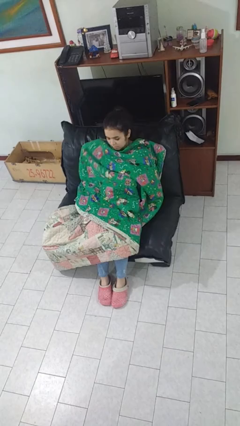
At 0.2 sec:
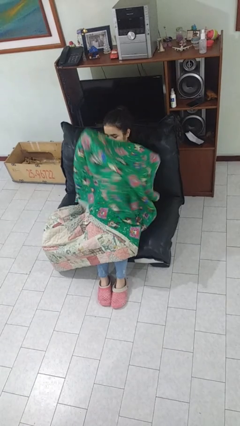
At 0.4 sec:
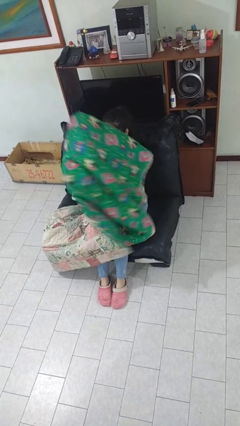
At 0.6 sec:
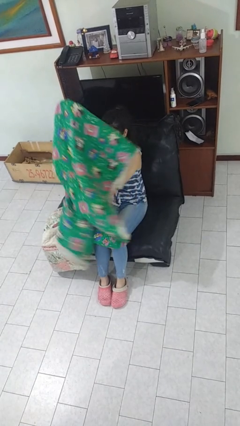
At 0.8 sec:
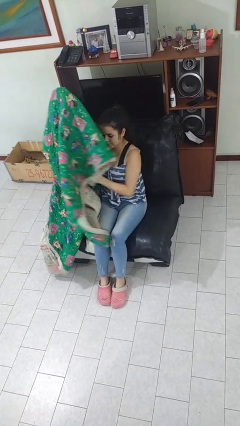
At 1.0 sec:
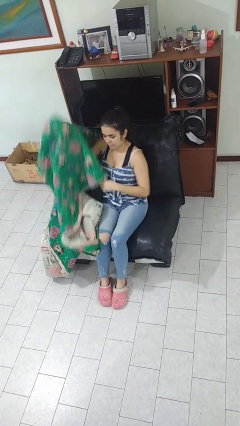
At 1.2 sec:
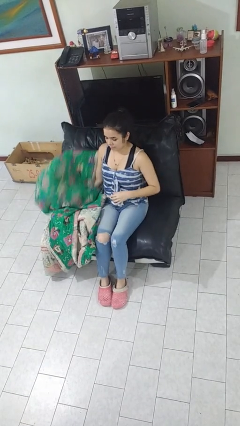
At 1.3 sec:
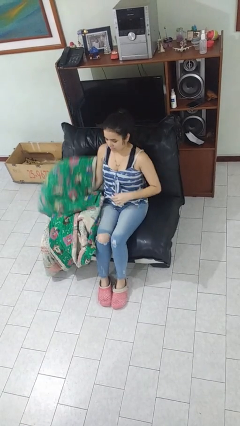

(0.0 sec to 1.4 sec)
person uncovers with blanket

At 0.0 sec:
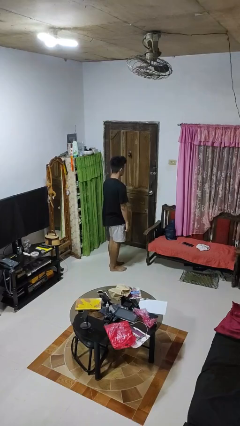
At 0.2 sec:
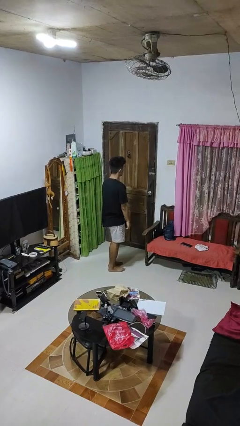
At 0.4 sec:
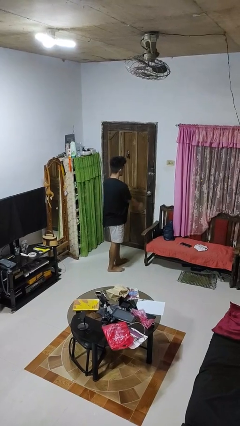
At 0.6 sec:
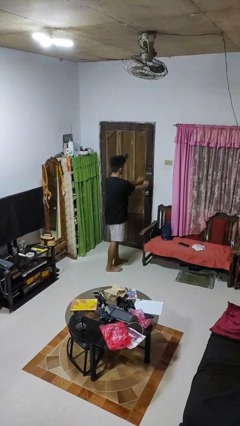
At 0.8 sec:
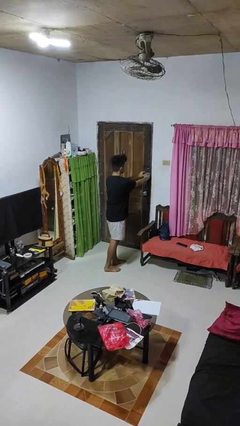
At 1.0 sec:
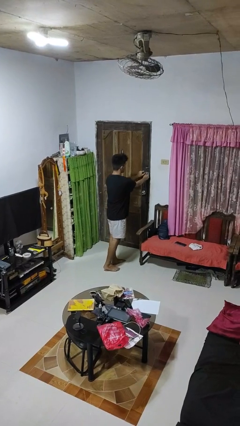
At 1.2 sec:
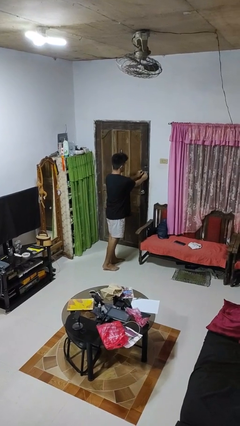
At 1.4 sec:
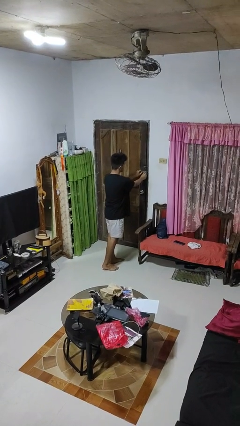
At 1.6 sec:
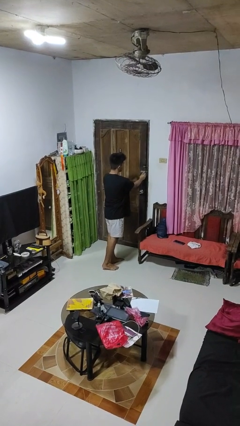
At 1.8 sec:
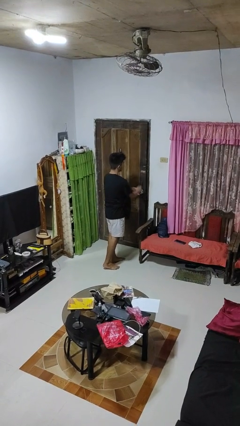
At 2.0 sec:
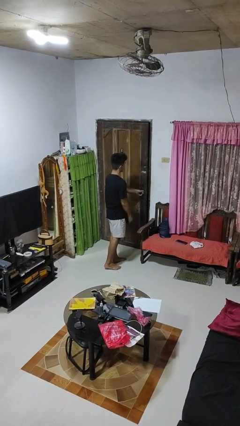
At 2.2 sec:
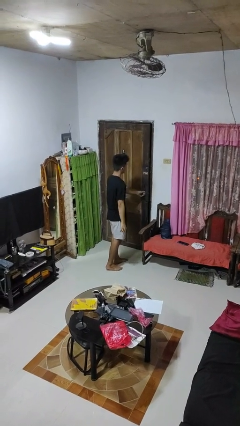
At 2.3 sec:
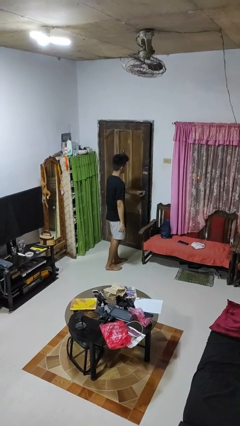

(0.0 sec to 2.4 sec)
person unlocks door with keys

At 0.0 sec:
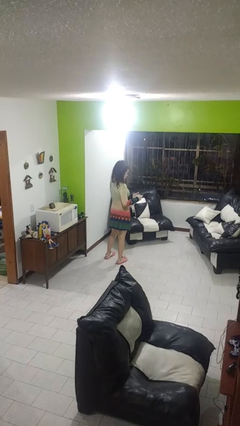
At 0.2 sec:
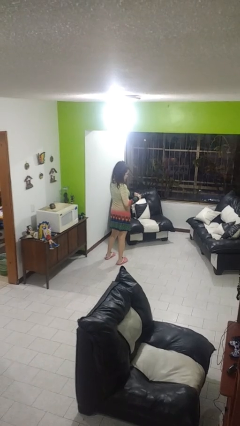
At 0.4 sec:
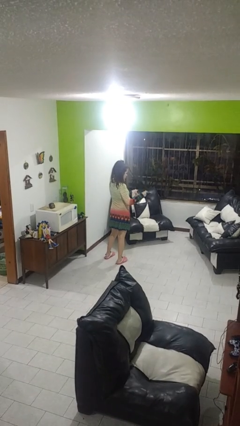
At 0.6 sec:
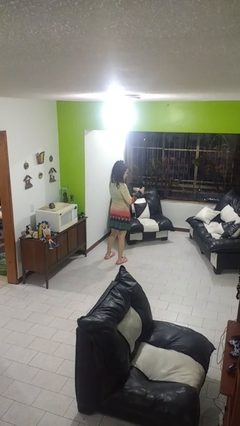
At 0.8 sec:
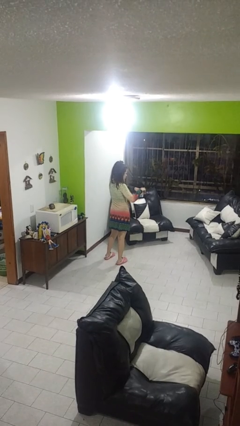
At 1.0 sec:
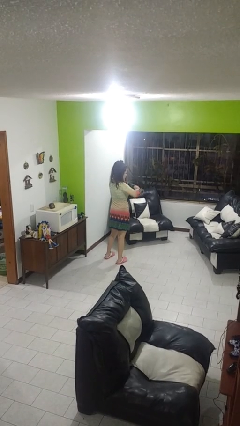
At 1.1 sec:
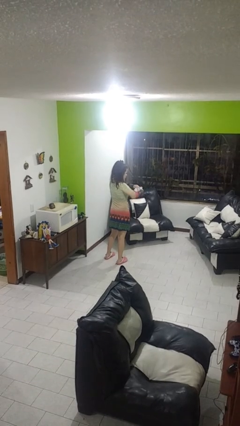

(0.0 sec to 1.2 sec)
person tears paper

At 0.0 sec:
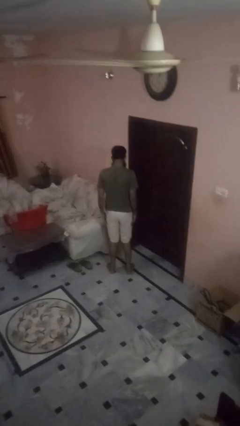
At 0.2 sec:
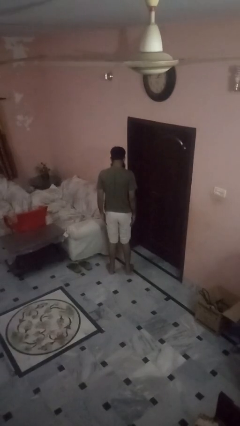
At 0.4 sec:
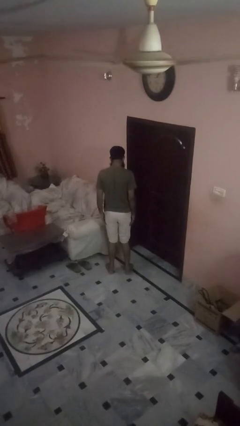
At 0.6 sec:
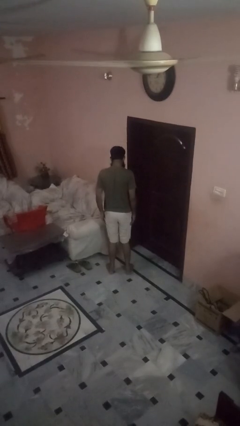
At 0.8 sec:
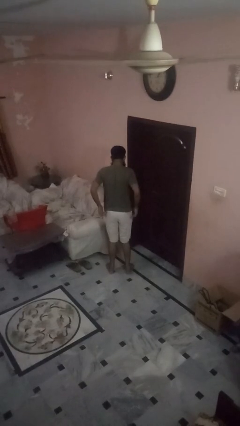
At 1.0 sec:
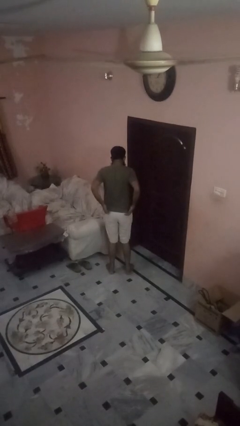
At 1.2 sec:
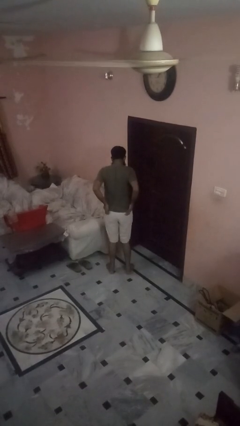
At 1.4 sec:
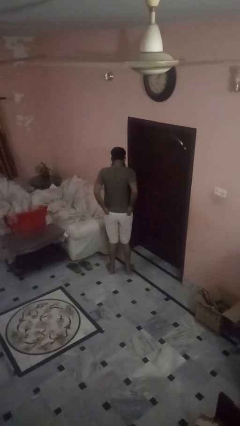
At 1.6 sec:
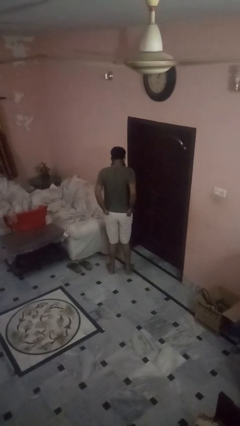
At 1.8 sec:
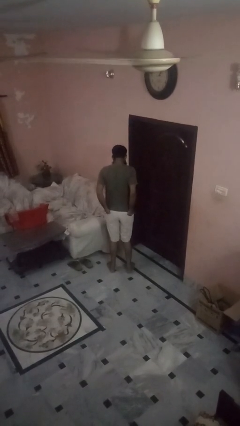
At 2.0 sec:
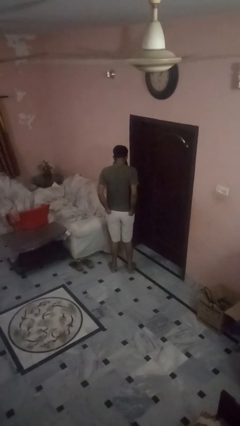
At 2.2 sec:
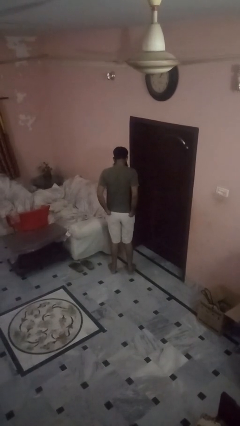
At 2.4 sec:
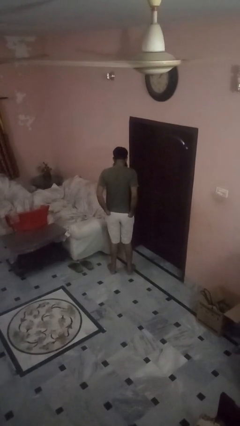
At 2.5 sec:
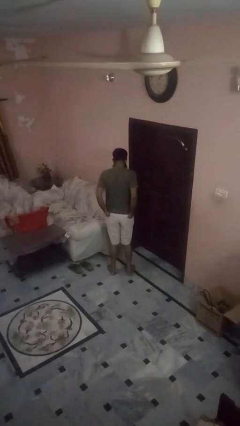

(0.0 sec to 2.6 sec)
person puts hands in back pockets

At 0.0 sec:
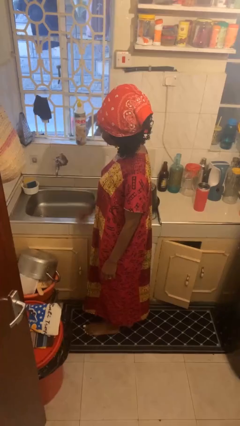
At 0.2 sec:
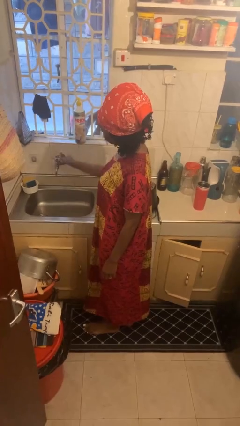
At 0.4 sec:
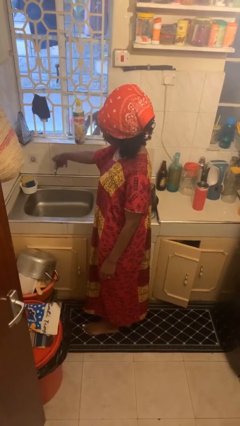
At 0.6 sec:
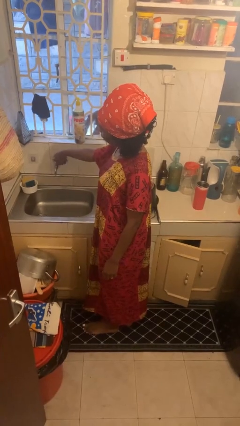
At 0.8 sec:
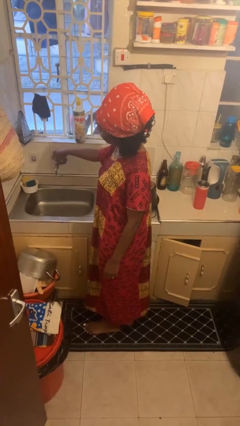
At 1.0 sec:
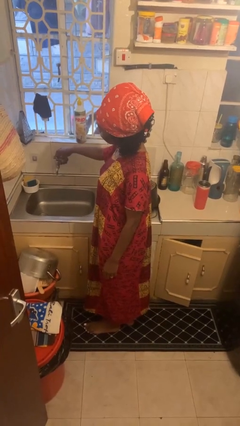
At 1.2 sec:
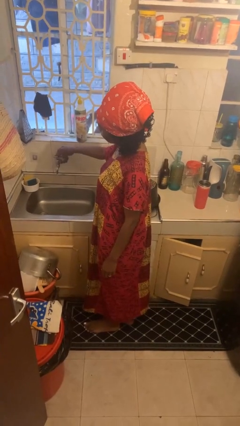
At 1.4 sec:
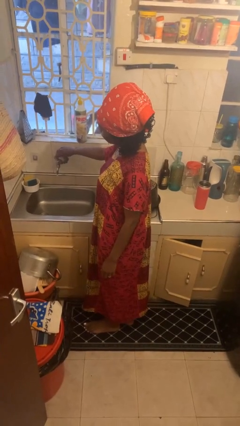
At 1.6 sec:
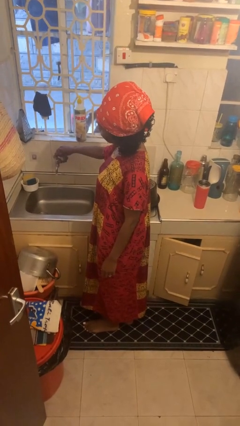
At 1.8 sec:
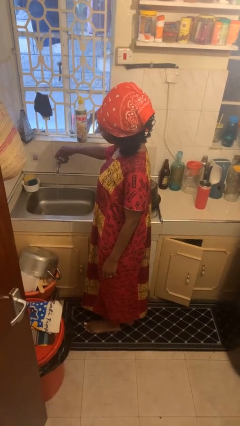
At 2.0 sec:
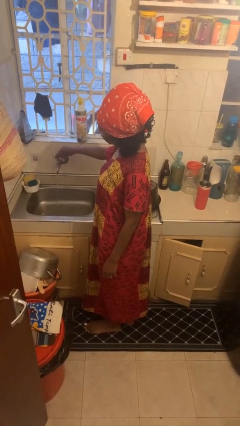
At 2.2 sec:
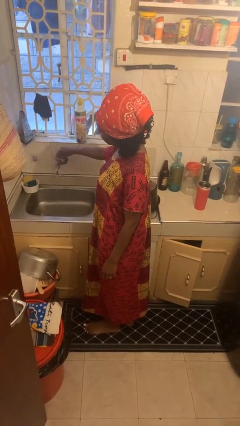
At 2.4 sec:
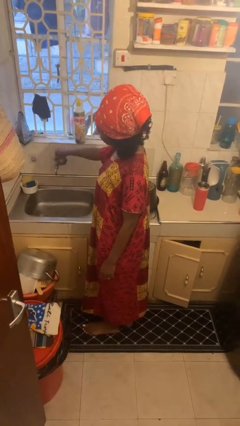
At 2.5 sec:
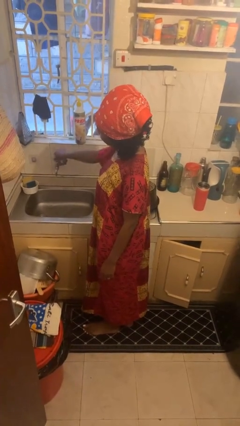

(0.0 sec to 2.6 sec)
person turns on faucet

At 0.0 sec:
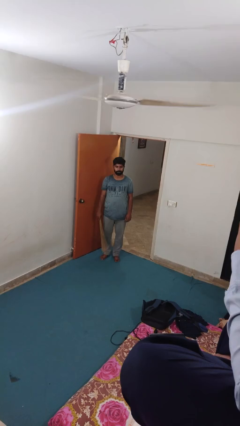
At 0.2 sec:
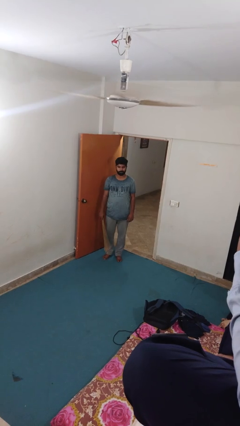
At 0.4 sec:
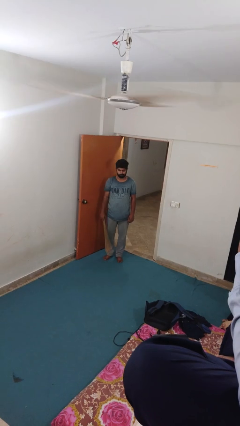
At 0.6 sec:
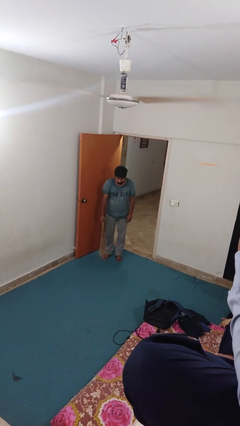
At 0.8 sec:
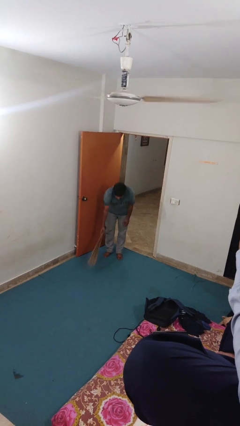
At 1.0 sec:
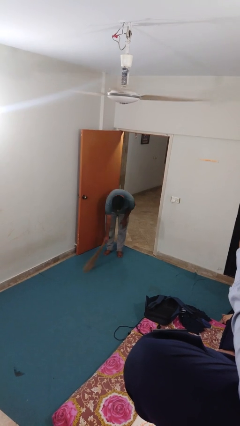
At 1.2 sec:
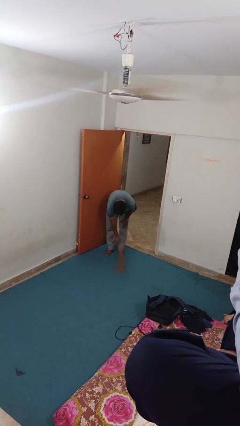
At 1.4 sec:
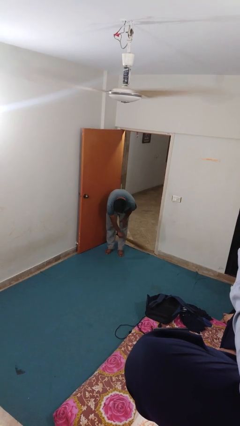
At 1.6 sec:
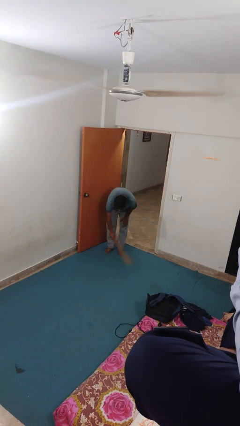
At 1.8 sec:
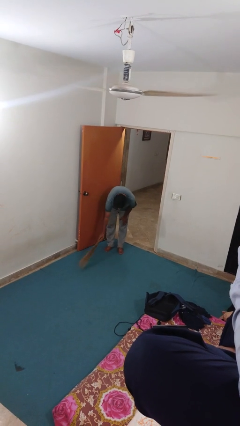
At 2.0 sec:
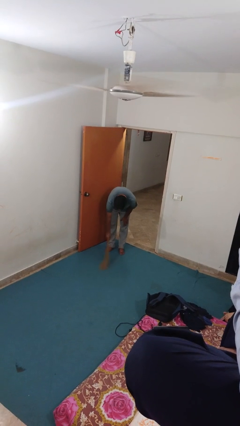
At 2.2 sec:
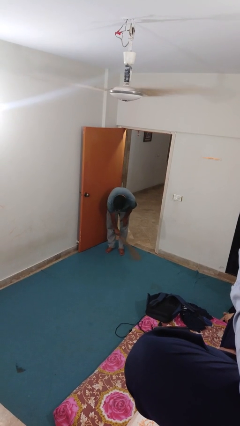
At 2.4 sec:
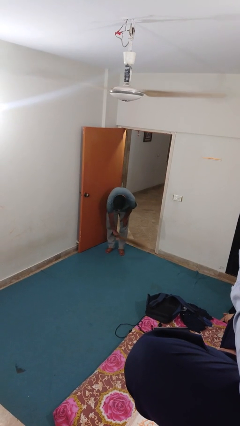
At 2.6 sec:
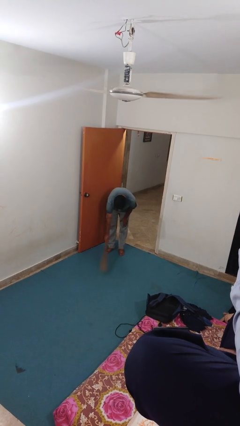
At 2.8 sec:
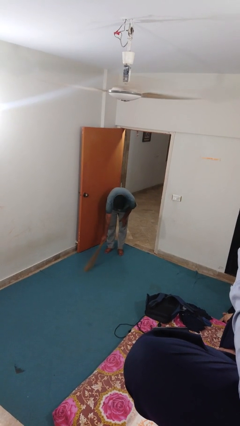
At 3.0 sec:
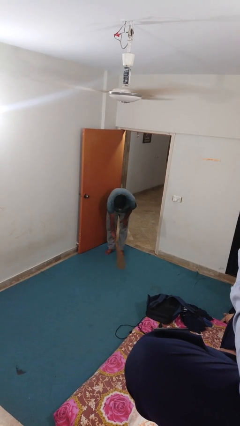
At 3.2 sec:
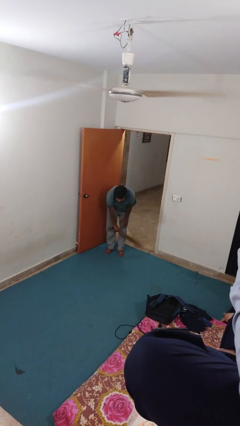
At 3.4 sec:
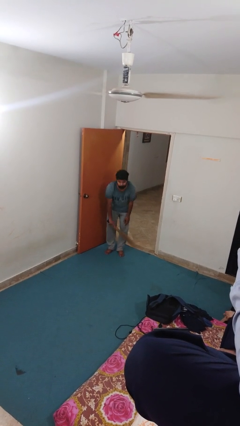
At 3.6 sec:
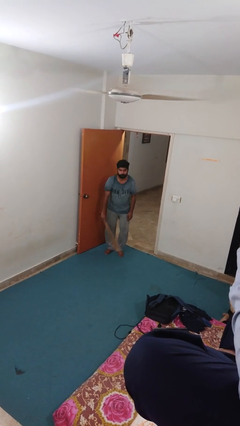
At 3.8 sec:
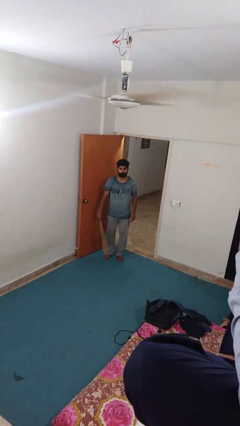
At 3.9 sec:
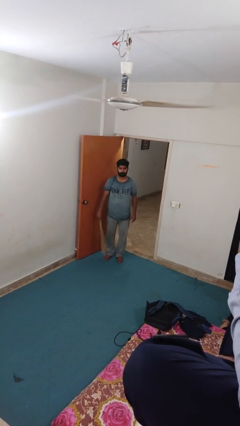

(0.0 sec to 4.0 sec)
person sweeps floor

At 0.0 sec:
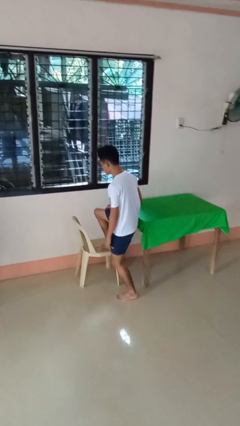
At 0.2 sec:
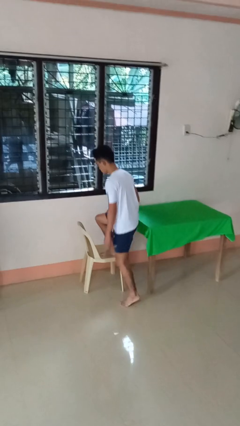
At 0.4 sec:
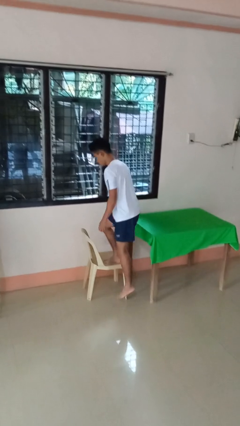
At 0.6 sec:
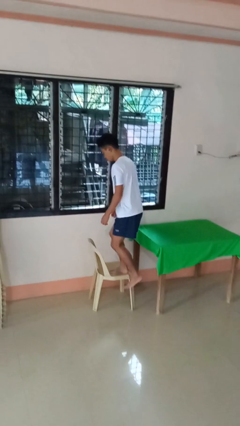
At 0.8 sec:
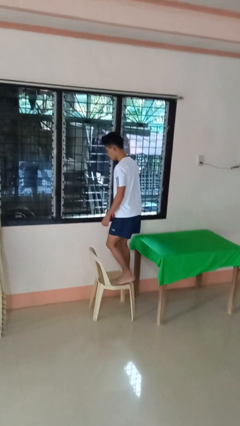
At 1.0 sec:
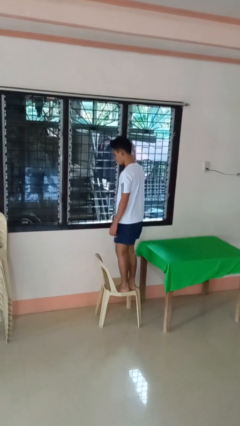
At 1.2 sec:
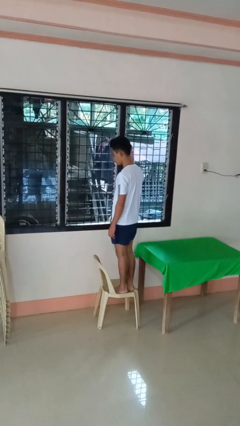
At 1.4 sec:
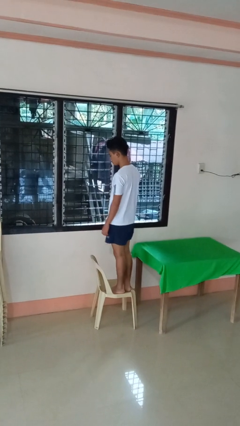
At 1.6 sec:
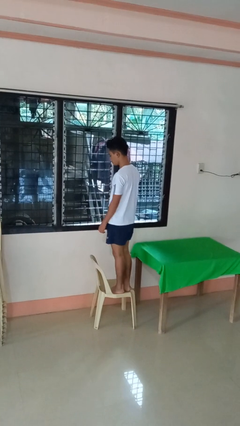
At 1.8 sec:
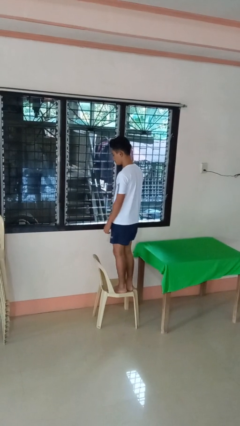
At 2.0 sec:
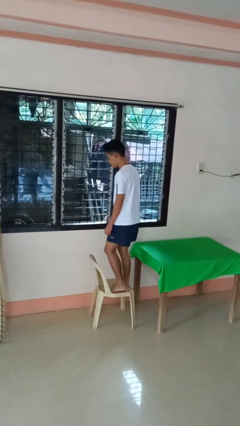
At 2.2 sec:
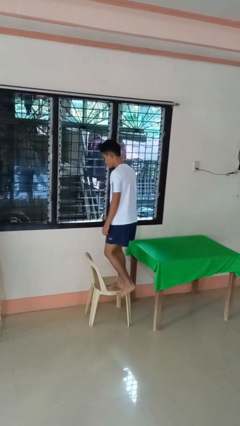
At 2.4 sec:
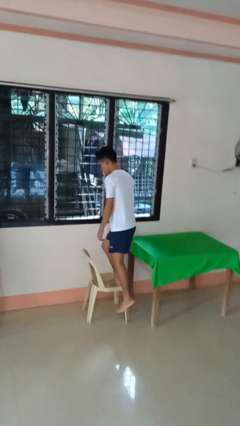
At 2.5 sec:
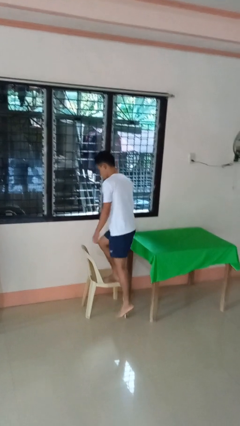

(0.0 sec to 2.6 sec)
person climbs on chair
